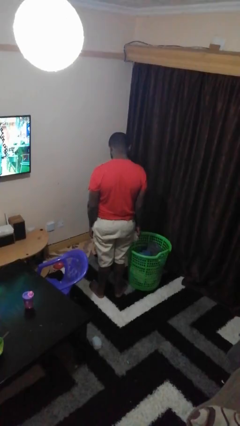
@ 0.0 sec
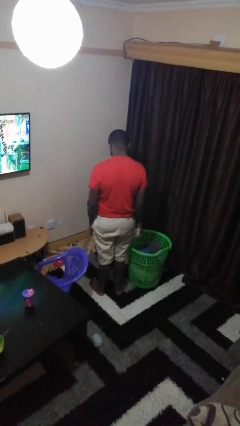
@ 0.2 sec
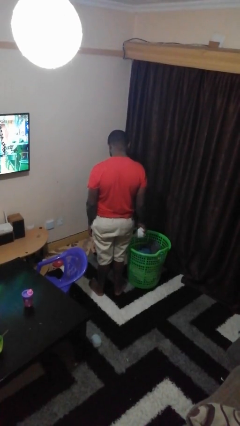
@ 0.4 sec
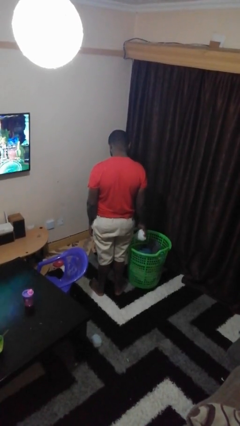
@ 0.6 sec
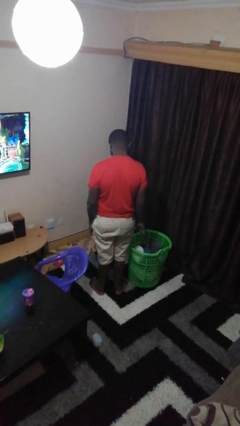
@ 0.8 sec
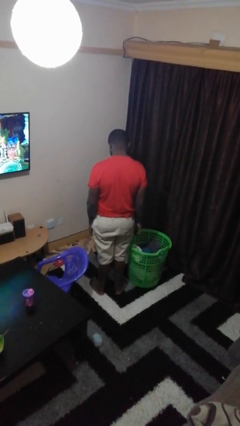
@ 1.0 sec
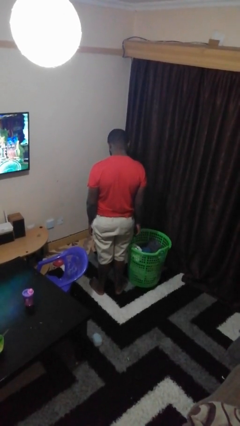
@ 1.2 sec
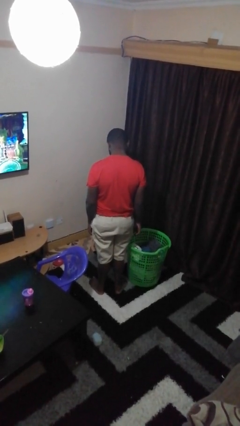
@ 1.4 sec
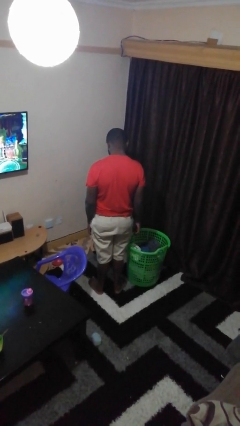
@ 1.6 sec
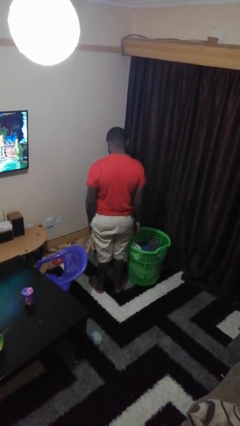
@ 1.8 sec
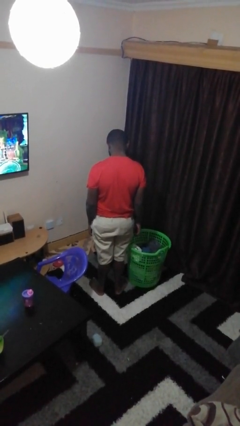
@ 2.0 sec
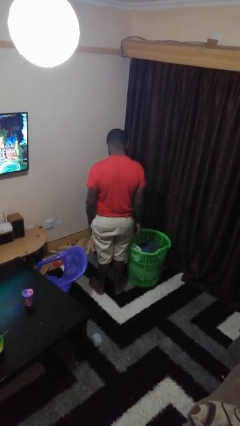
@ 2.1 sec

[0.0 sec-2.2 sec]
person puts object into basket

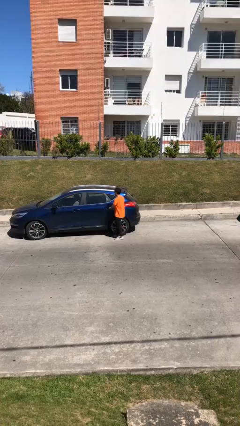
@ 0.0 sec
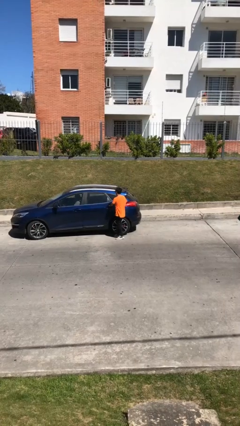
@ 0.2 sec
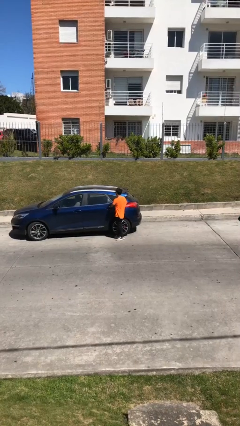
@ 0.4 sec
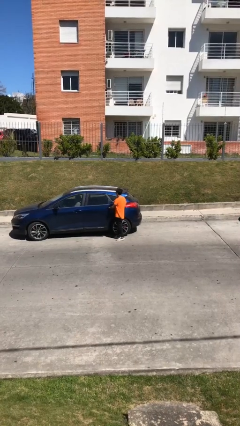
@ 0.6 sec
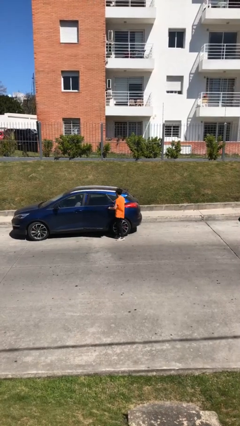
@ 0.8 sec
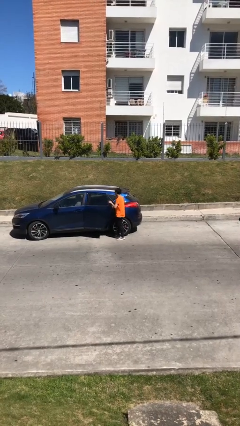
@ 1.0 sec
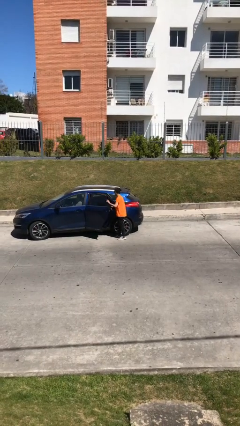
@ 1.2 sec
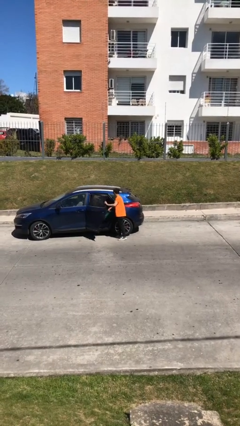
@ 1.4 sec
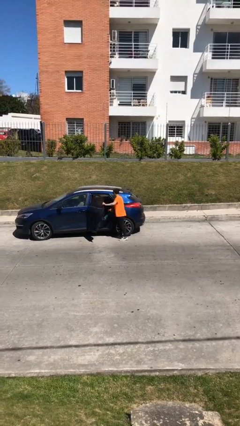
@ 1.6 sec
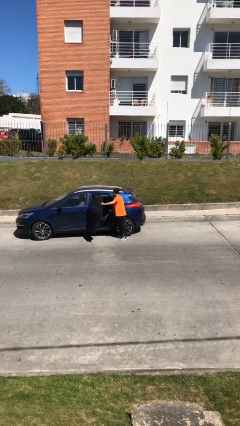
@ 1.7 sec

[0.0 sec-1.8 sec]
person opens car door

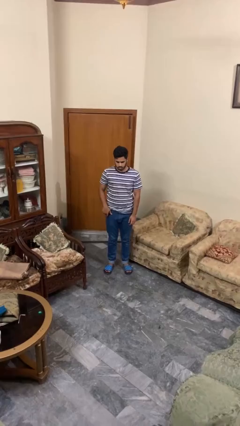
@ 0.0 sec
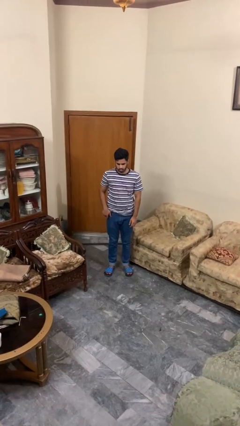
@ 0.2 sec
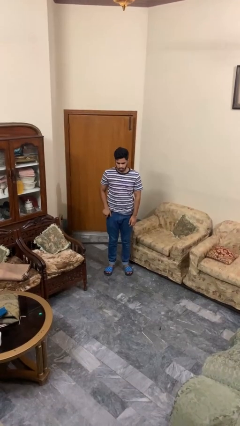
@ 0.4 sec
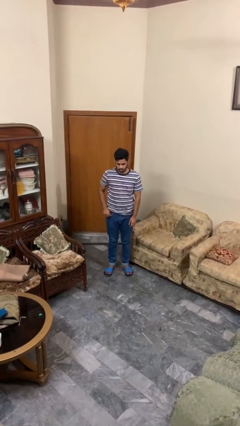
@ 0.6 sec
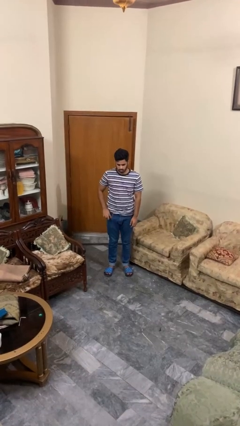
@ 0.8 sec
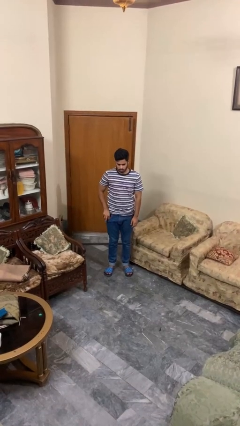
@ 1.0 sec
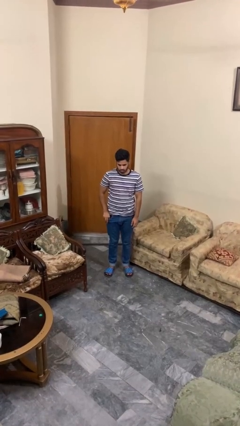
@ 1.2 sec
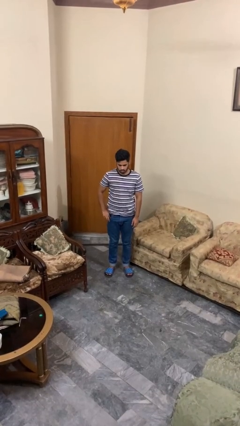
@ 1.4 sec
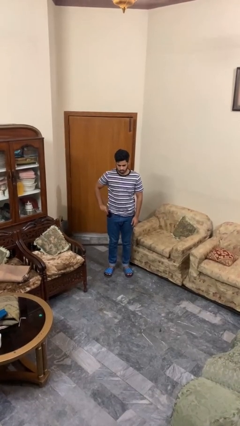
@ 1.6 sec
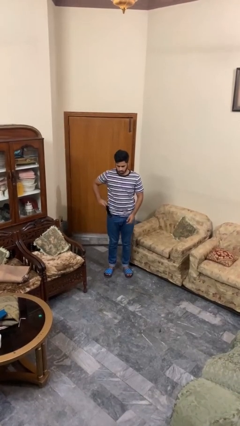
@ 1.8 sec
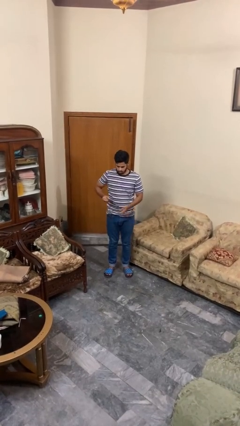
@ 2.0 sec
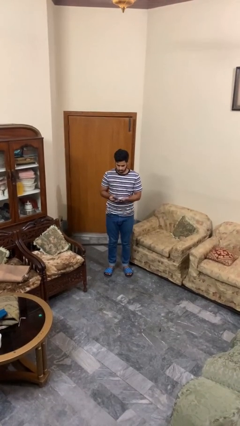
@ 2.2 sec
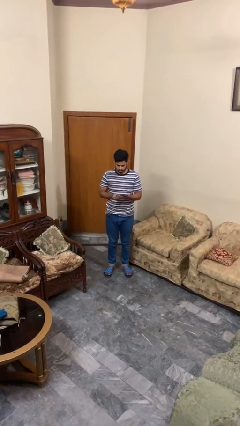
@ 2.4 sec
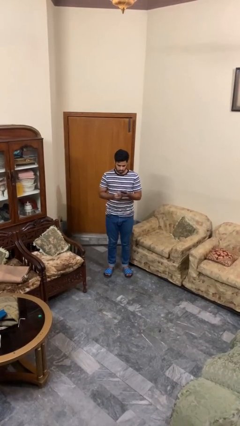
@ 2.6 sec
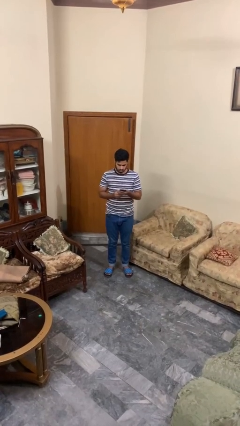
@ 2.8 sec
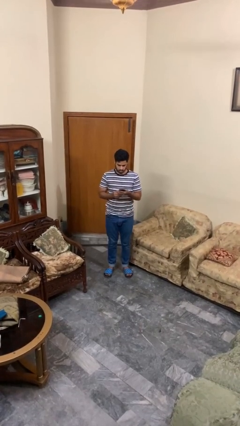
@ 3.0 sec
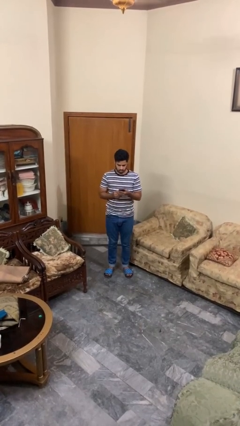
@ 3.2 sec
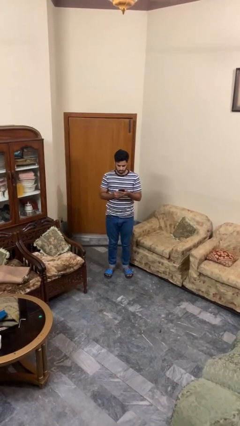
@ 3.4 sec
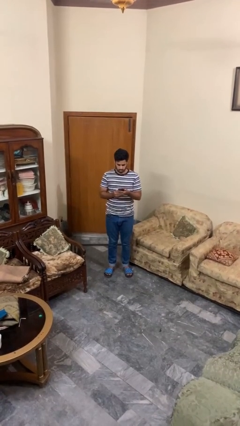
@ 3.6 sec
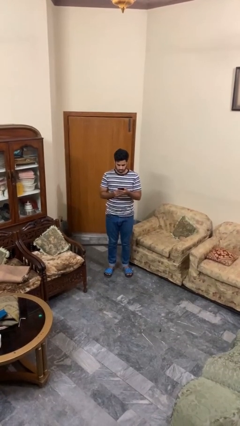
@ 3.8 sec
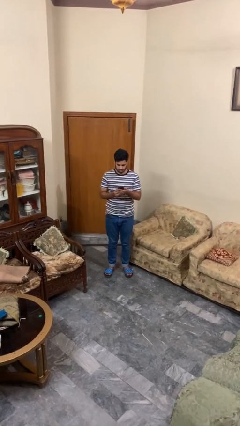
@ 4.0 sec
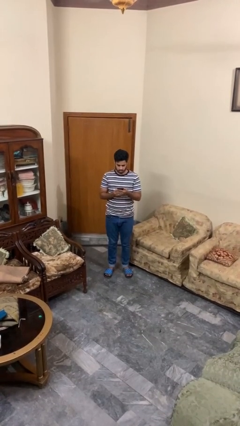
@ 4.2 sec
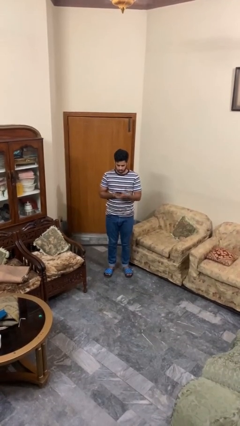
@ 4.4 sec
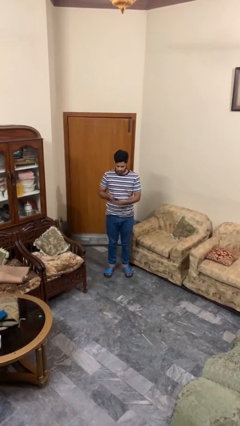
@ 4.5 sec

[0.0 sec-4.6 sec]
person takes phone from pocket

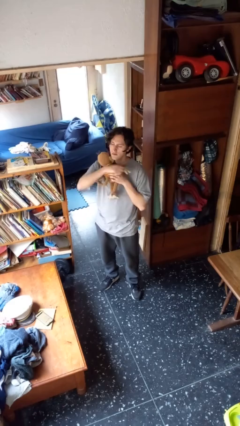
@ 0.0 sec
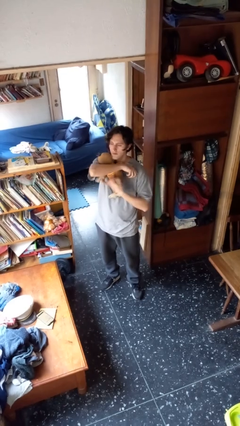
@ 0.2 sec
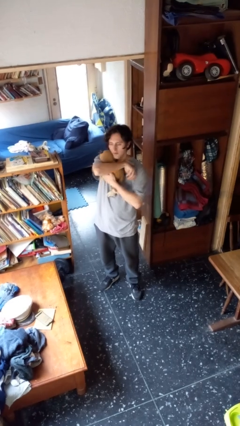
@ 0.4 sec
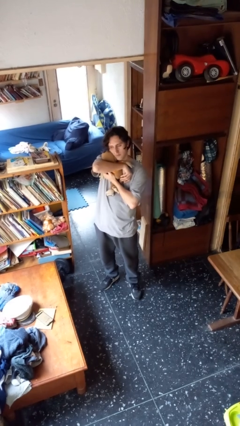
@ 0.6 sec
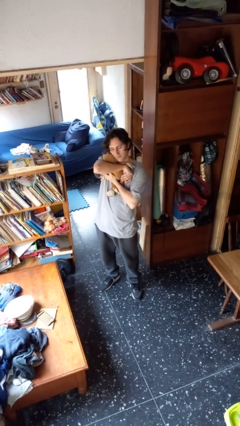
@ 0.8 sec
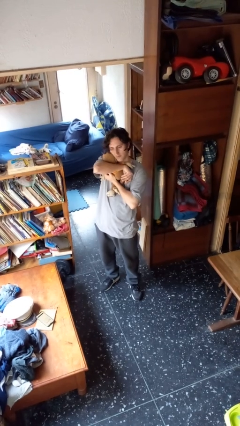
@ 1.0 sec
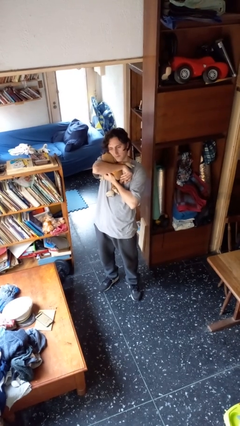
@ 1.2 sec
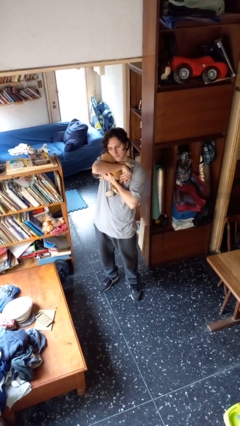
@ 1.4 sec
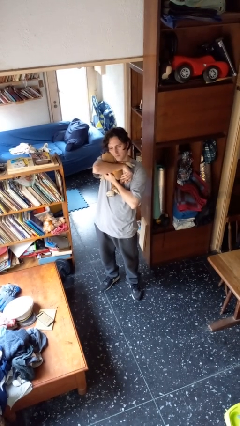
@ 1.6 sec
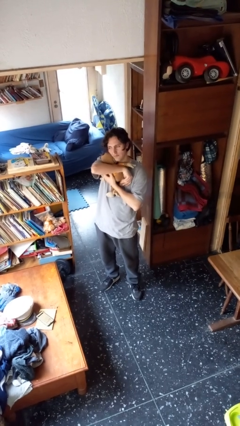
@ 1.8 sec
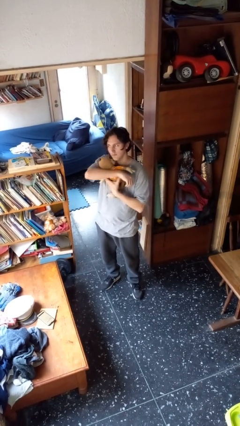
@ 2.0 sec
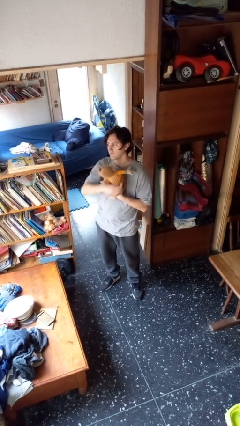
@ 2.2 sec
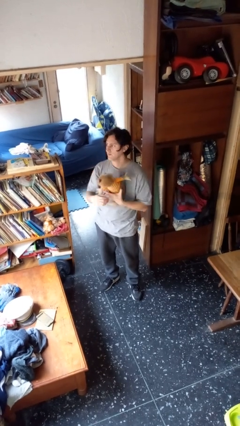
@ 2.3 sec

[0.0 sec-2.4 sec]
person hugs stuffed animal

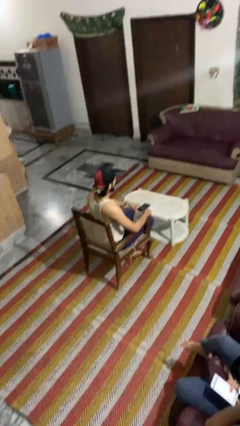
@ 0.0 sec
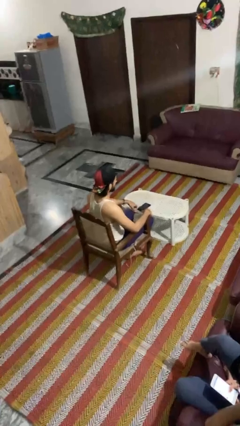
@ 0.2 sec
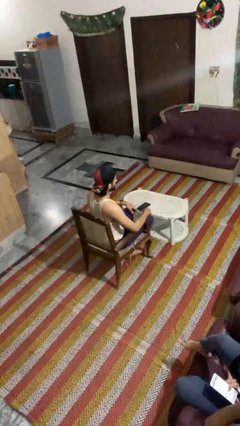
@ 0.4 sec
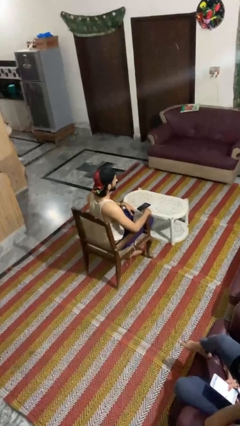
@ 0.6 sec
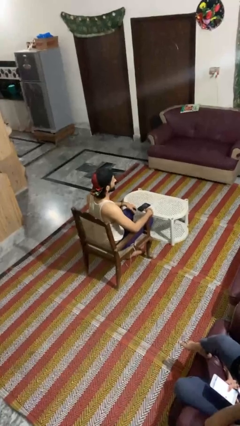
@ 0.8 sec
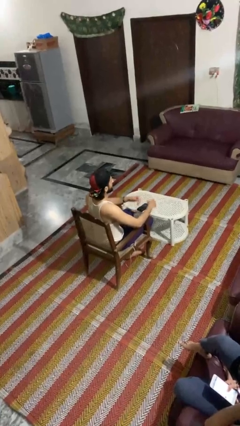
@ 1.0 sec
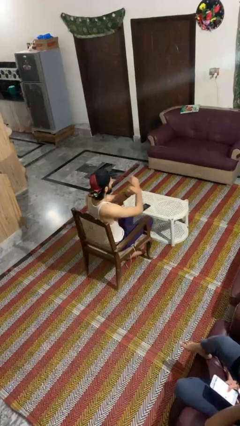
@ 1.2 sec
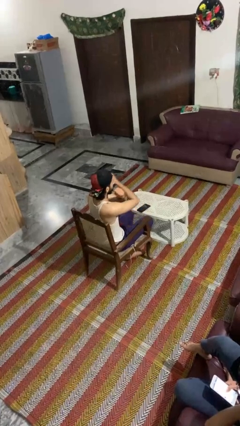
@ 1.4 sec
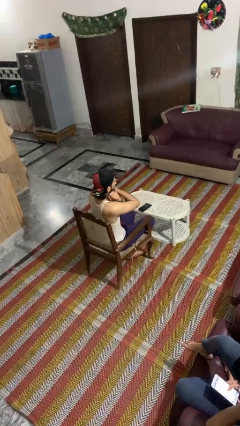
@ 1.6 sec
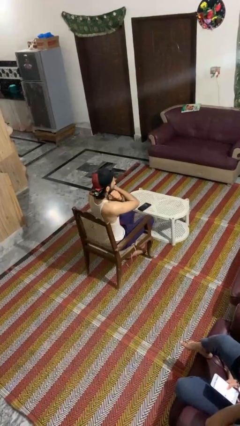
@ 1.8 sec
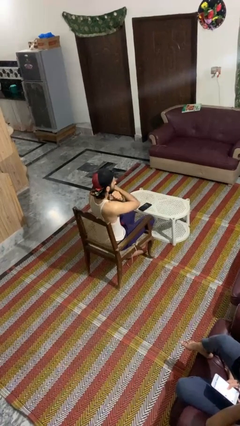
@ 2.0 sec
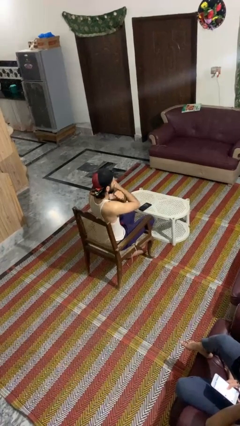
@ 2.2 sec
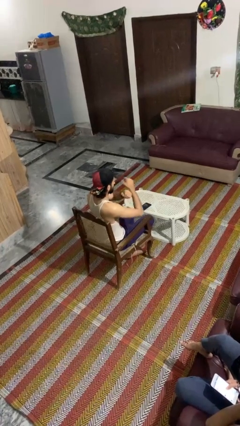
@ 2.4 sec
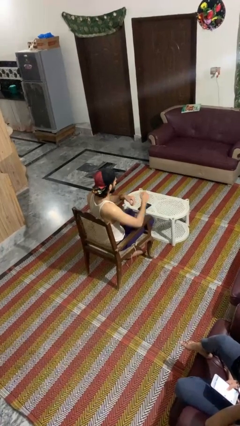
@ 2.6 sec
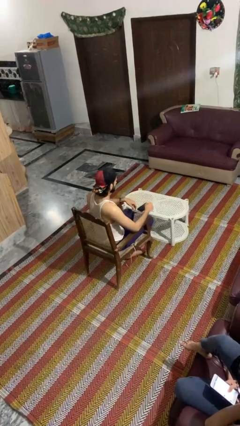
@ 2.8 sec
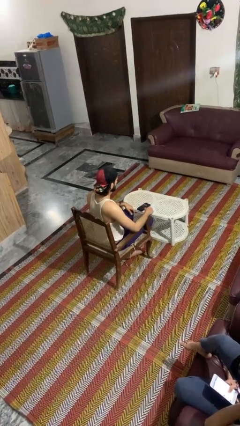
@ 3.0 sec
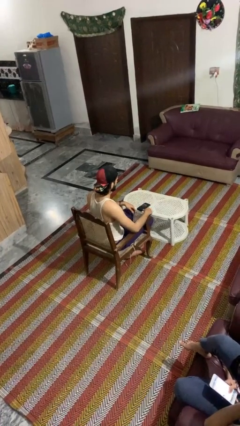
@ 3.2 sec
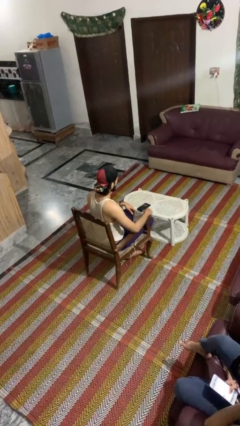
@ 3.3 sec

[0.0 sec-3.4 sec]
person gestures arms x

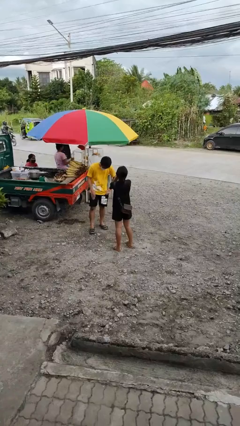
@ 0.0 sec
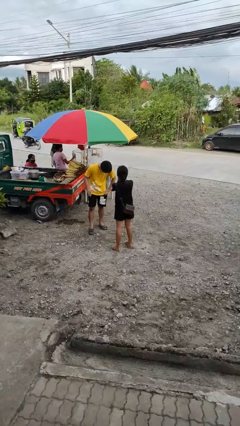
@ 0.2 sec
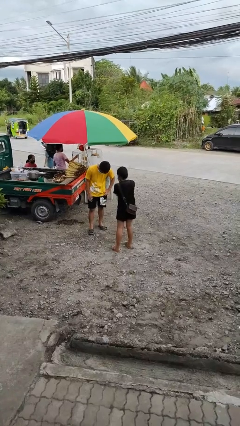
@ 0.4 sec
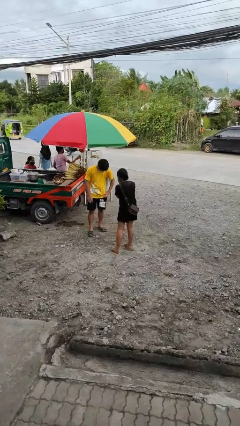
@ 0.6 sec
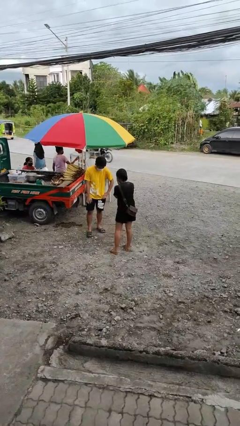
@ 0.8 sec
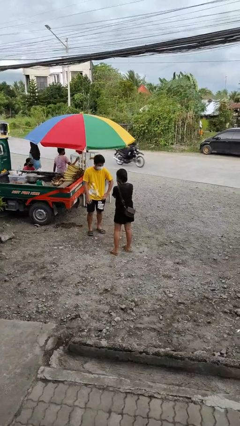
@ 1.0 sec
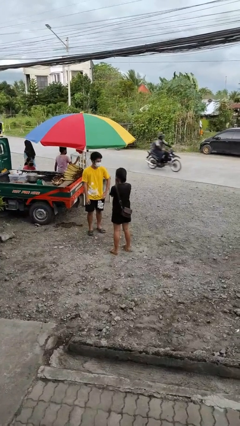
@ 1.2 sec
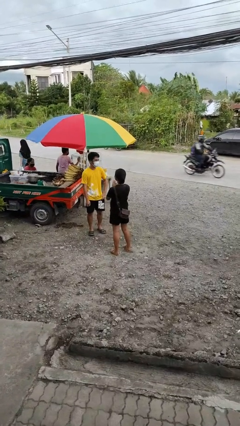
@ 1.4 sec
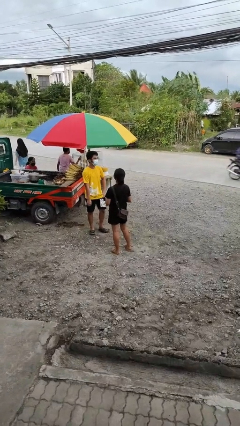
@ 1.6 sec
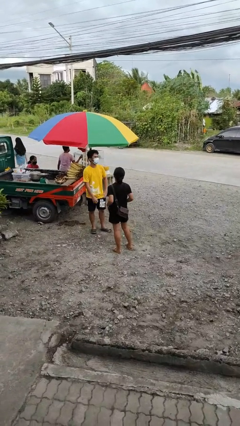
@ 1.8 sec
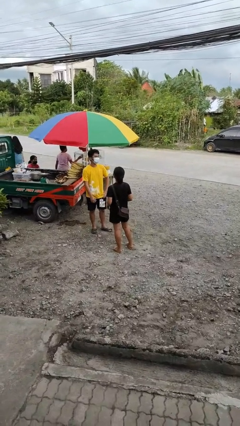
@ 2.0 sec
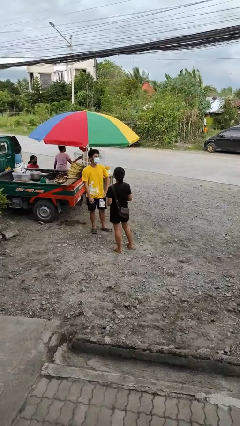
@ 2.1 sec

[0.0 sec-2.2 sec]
person laughs with person

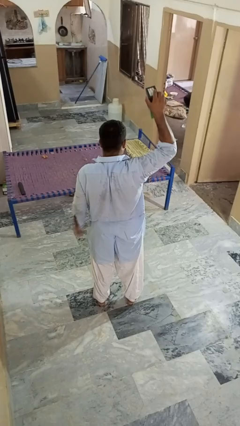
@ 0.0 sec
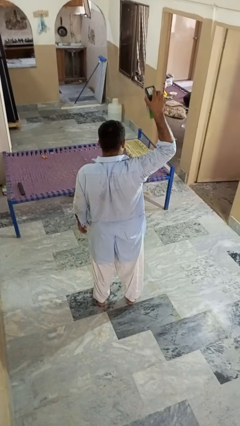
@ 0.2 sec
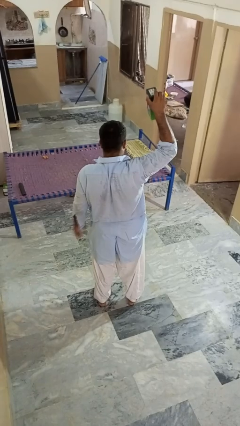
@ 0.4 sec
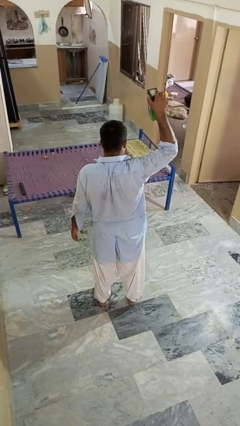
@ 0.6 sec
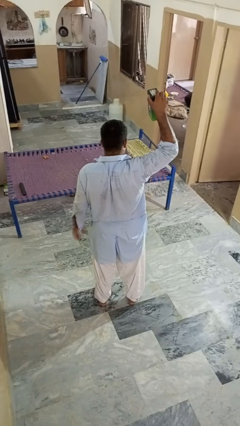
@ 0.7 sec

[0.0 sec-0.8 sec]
person drops object
